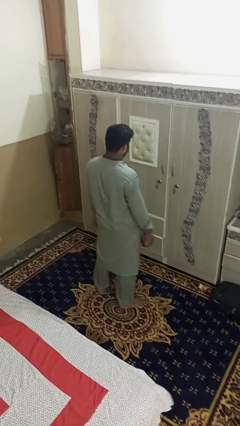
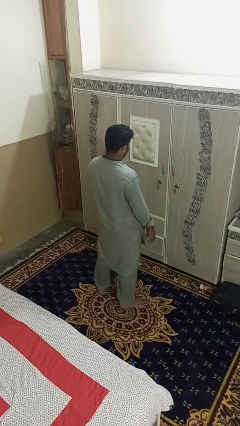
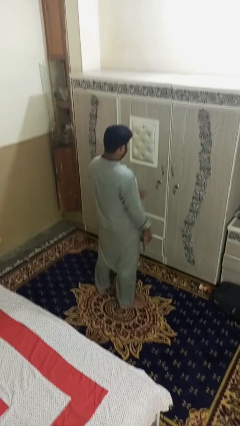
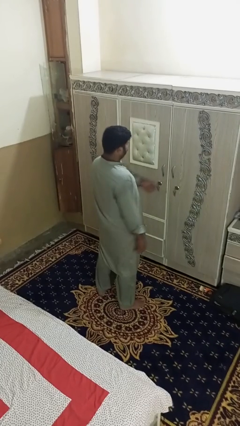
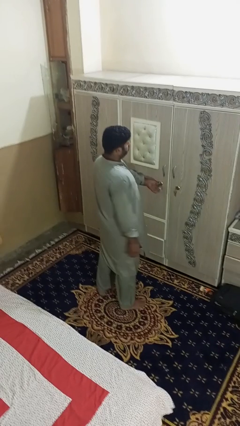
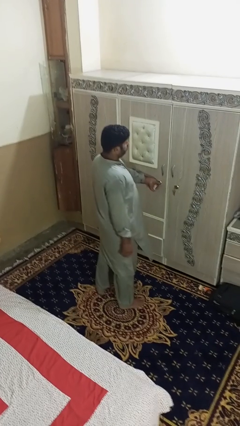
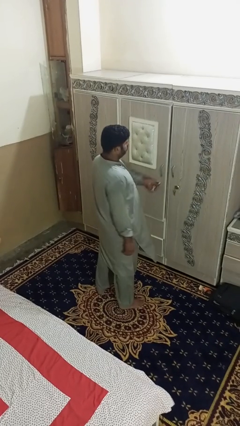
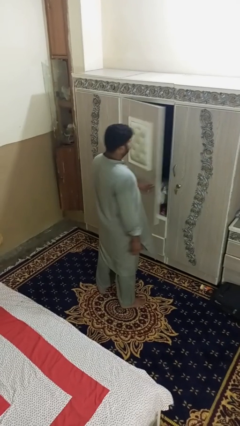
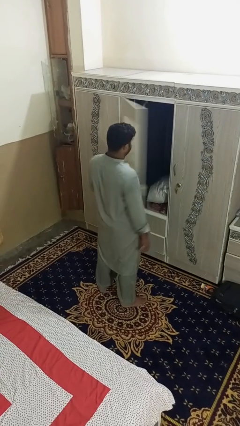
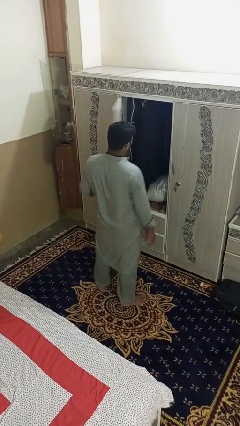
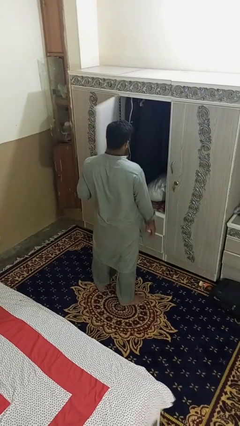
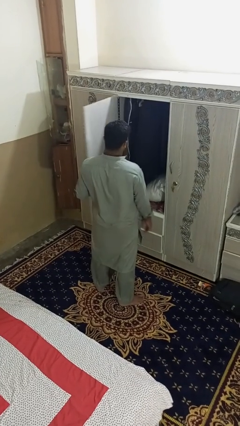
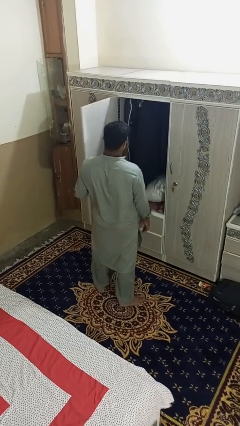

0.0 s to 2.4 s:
person opens dresser drawer

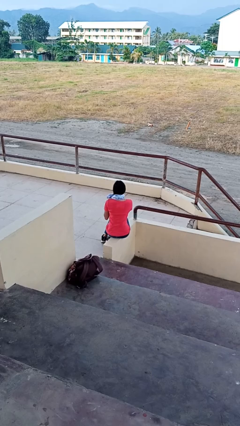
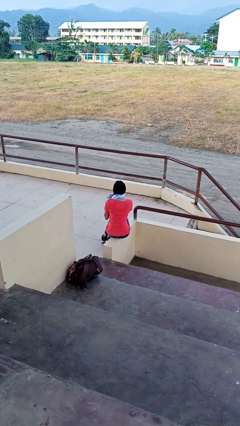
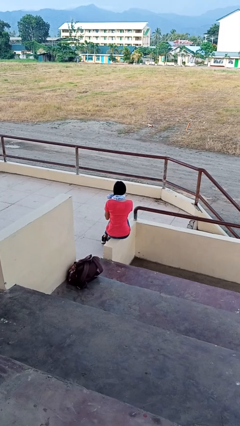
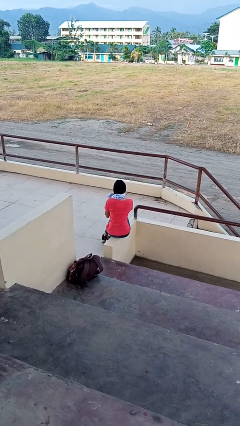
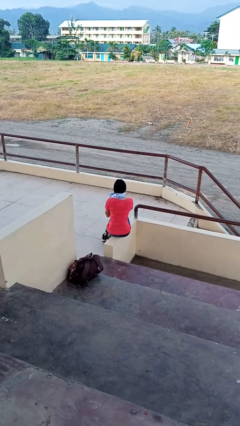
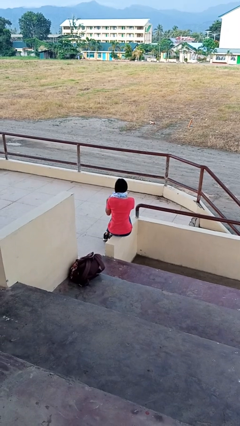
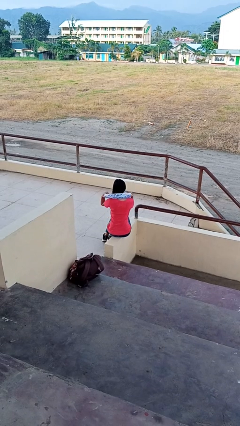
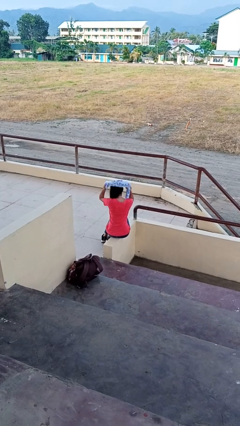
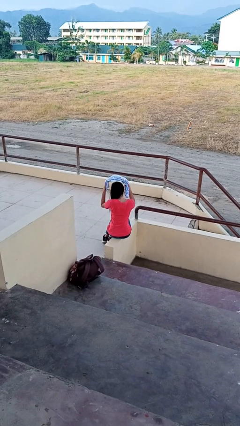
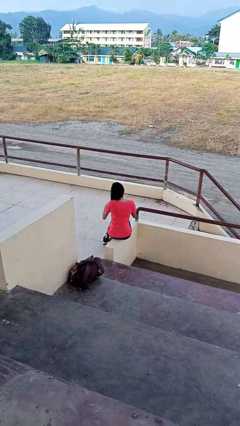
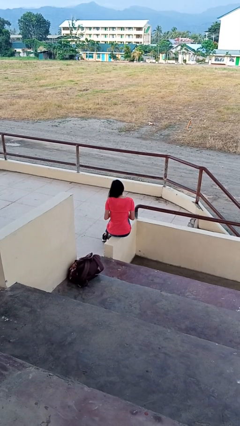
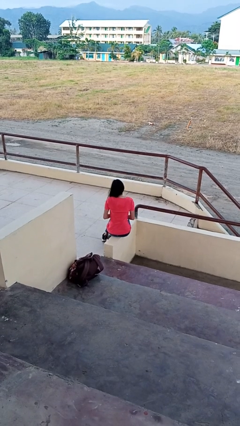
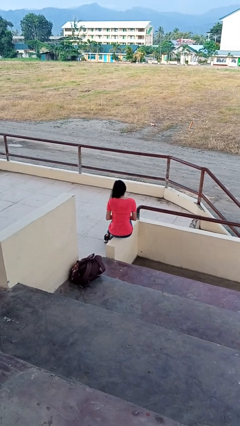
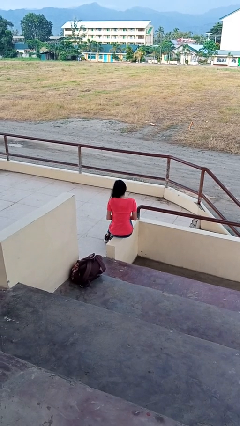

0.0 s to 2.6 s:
person takes off scarf

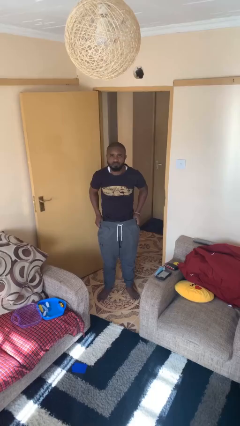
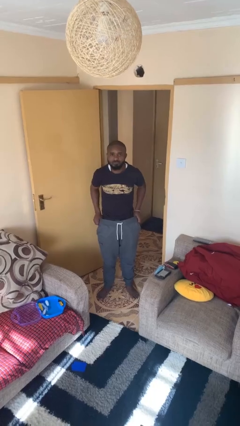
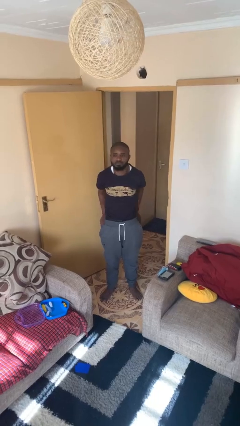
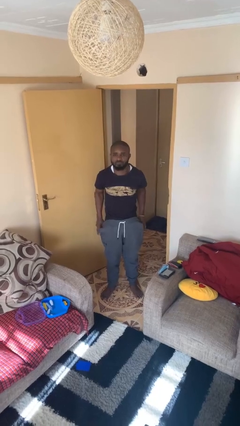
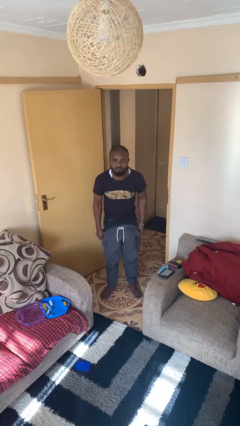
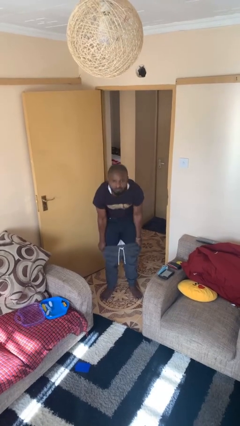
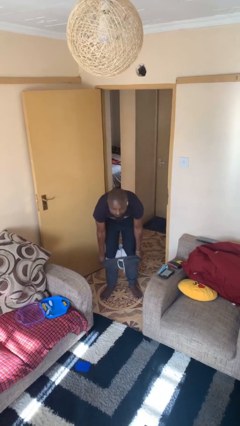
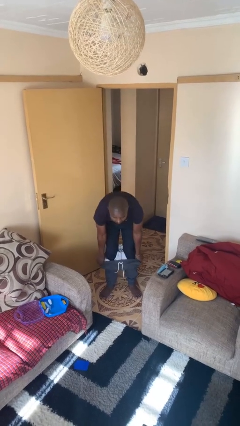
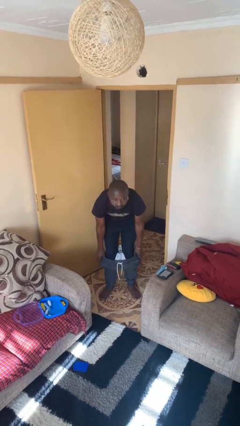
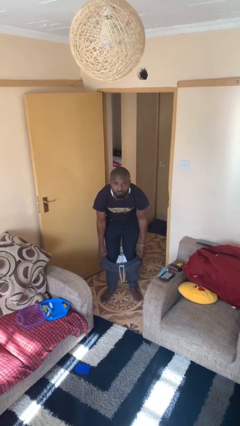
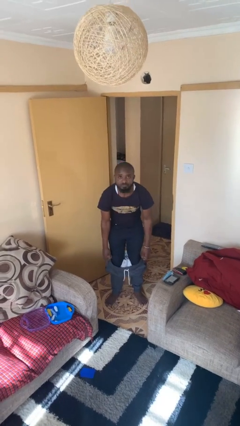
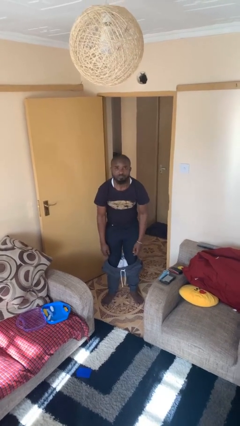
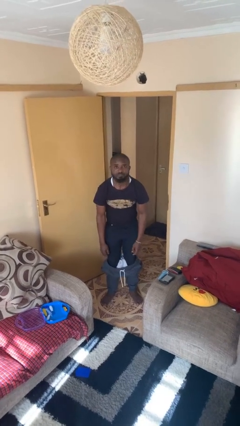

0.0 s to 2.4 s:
person takes off pants

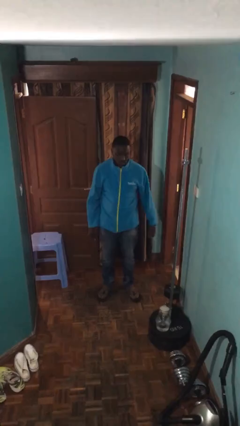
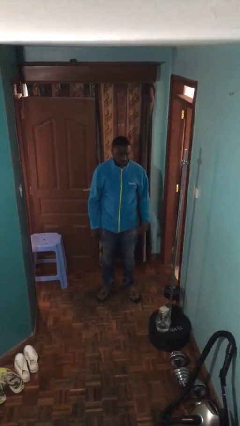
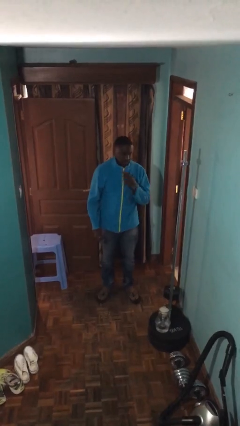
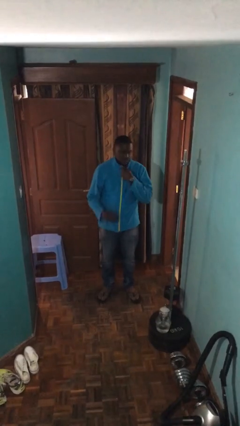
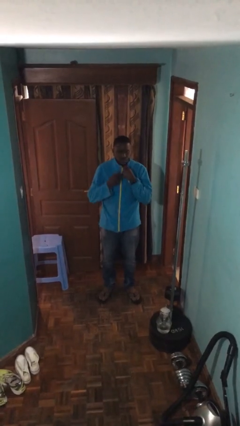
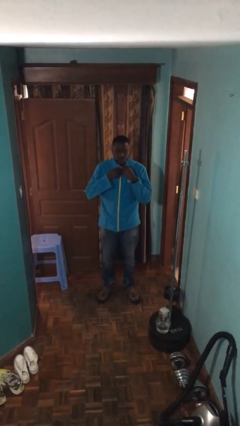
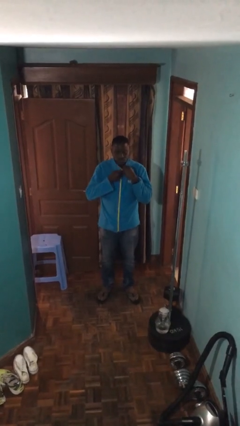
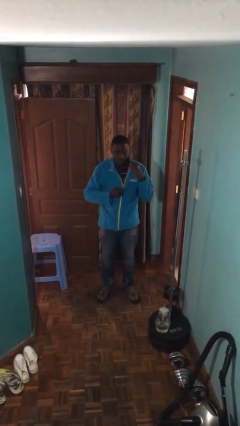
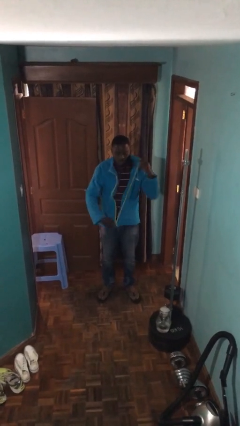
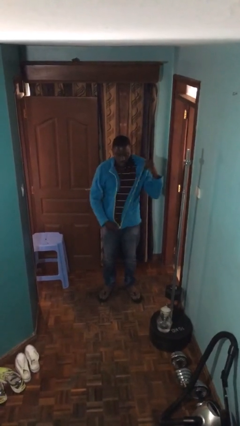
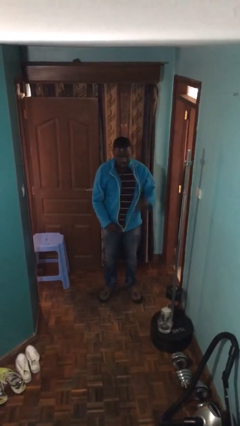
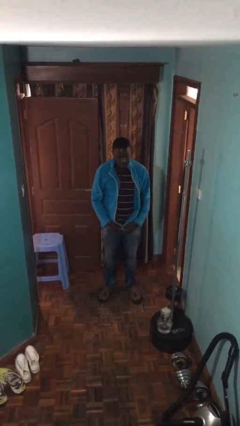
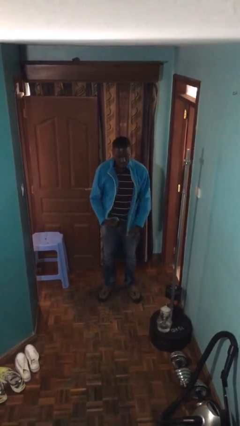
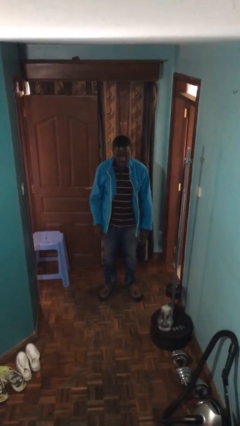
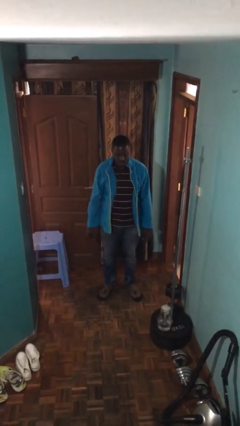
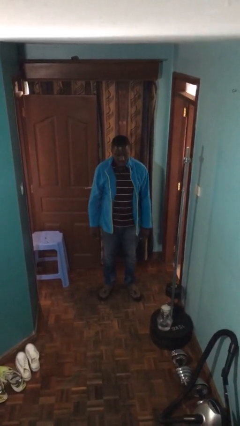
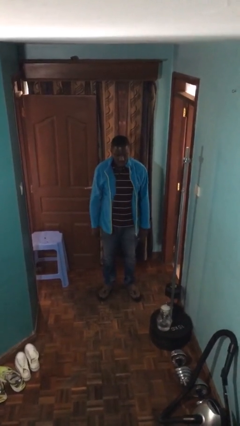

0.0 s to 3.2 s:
person unzips jacket

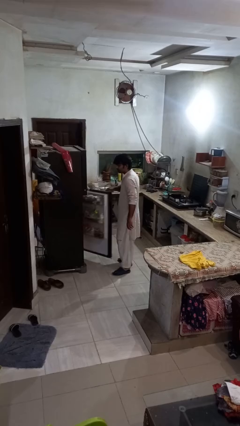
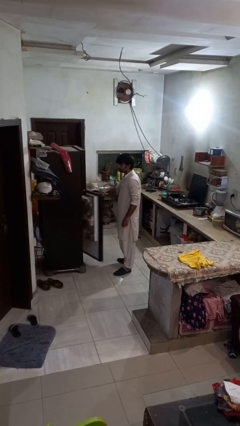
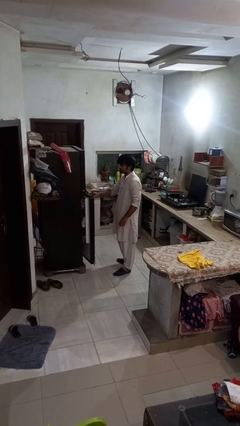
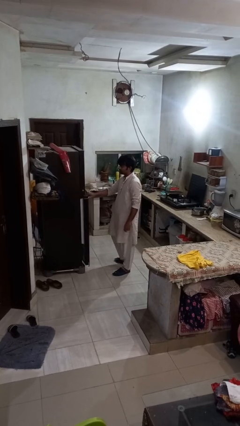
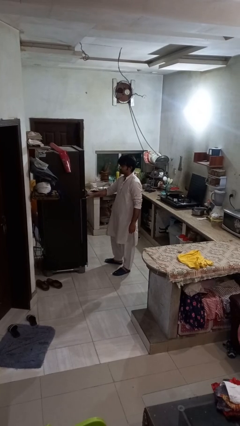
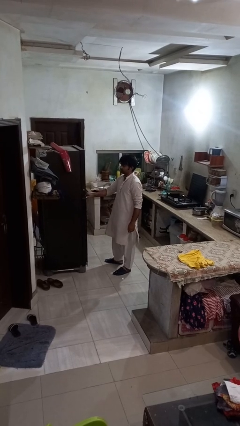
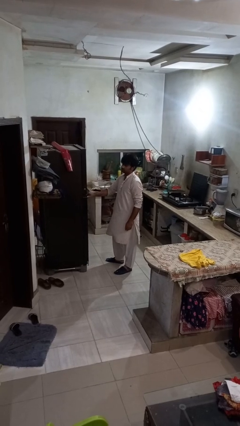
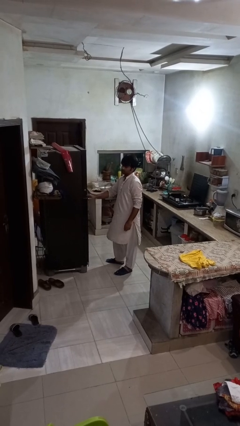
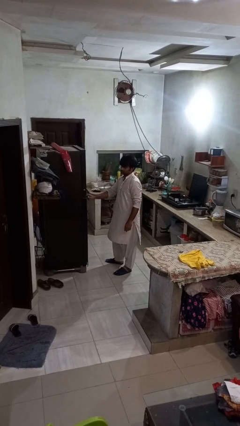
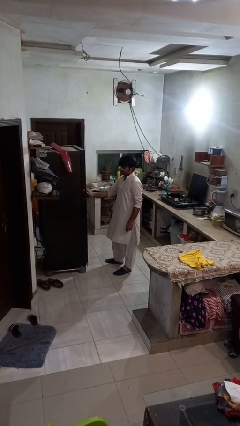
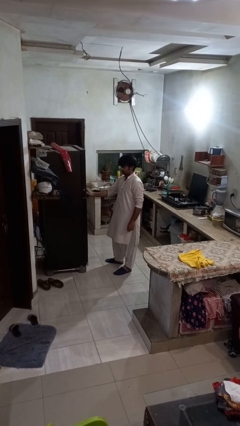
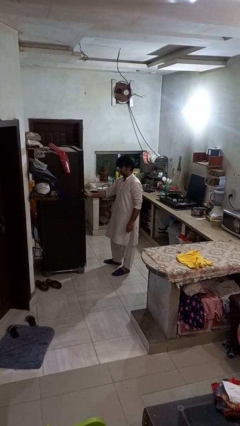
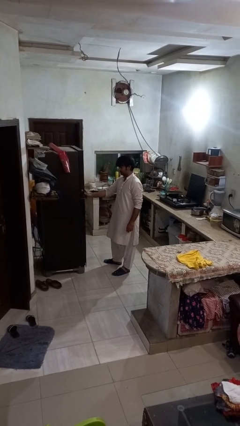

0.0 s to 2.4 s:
person closes refrigerator

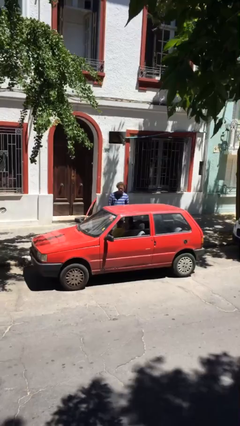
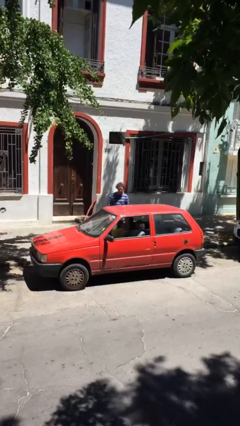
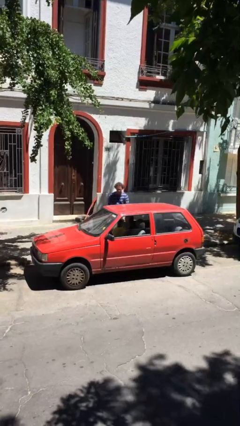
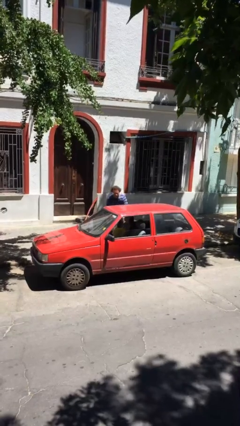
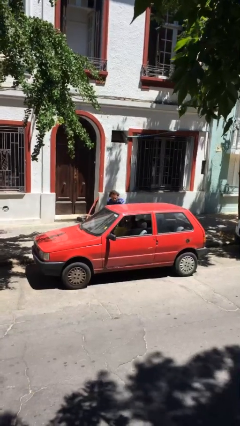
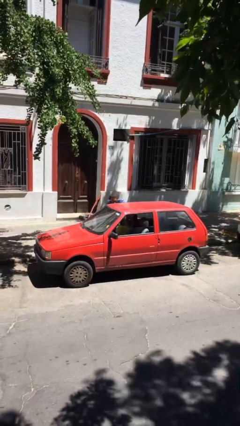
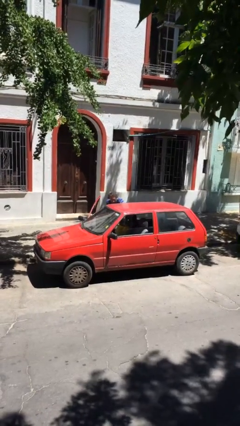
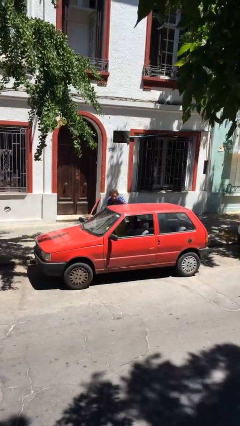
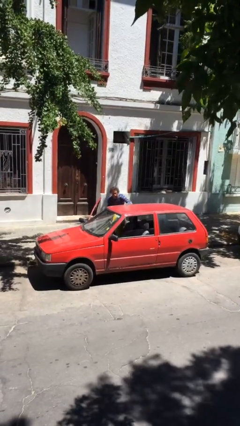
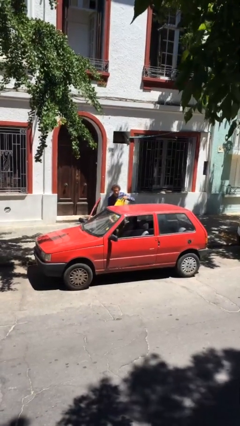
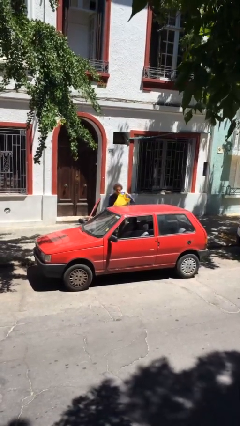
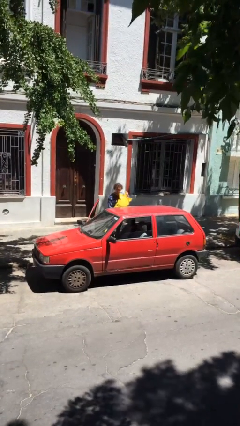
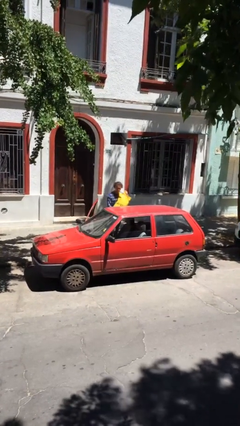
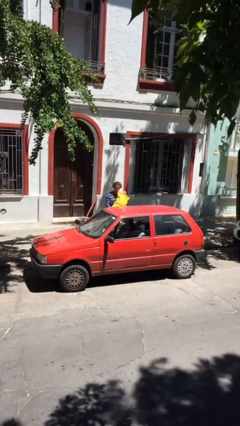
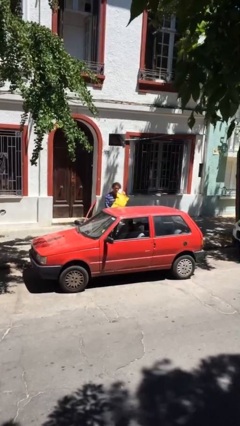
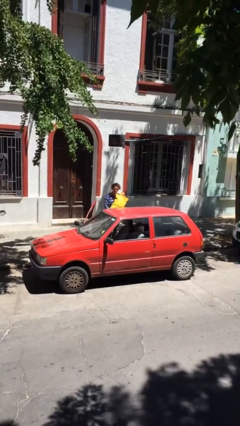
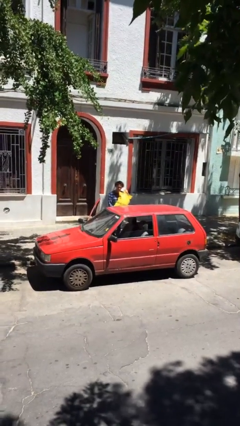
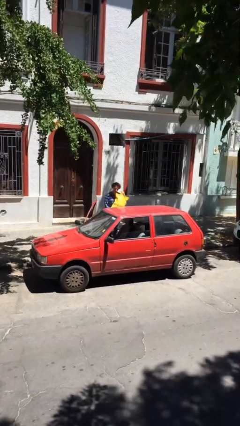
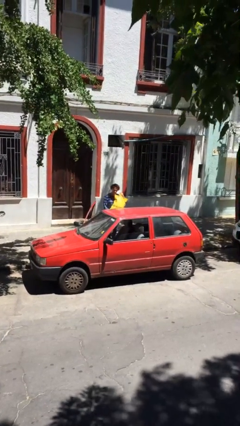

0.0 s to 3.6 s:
person unloads car

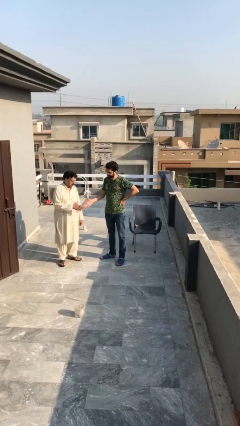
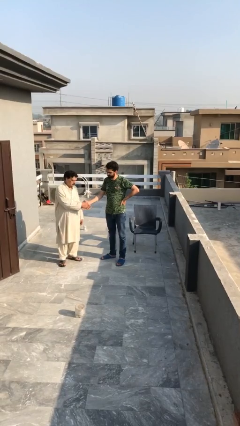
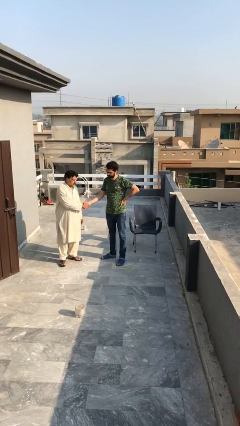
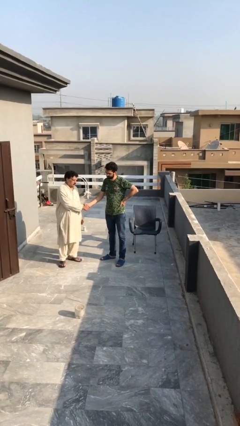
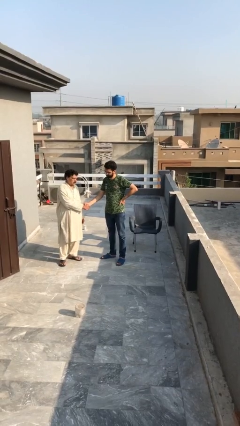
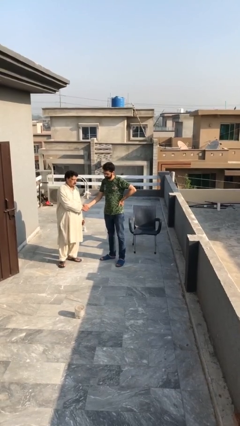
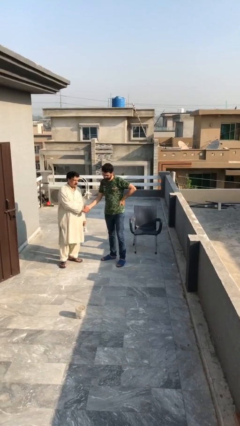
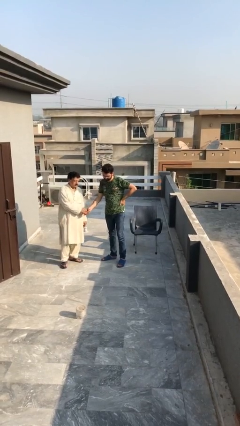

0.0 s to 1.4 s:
person shakes hand
